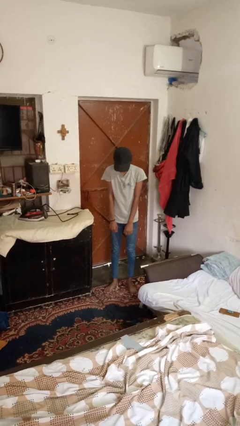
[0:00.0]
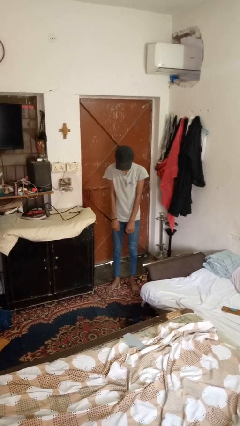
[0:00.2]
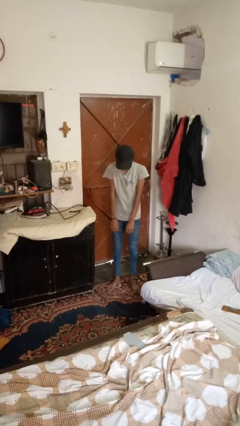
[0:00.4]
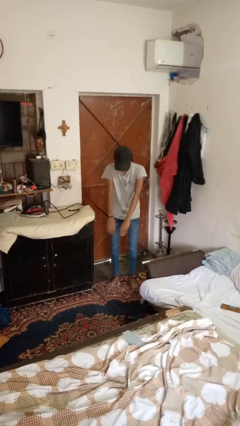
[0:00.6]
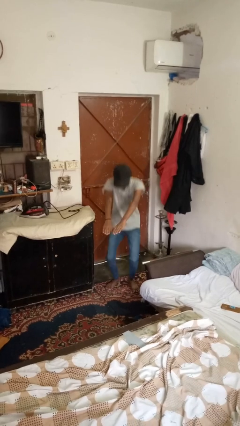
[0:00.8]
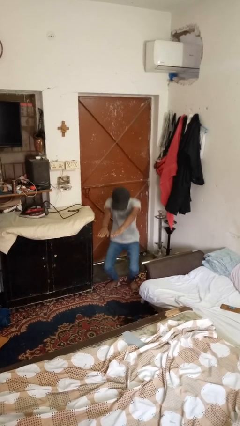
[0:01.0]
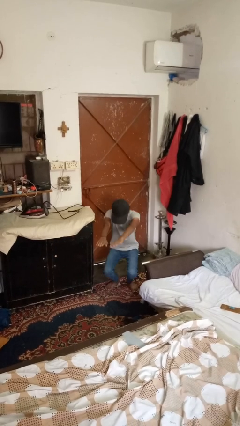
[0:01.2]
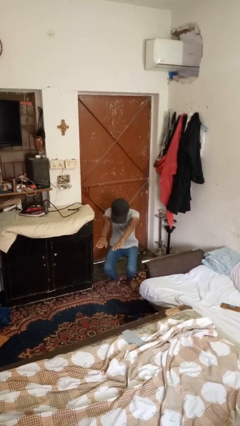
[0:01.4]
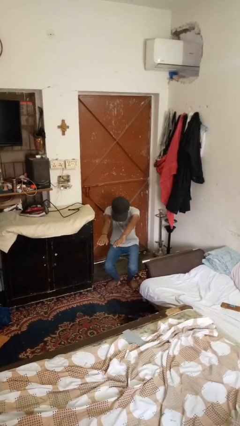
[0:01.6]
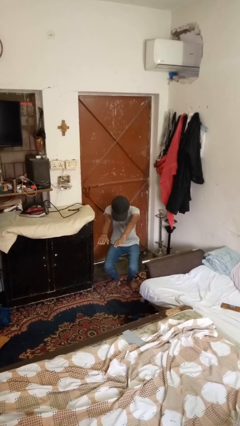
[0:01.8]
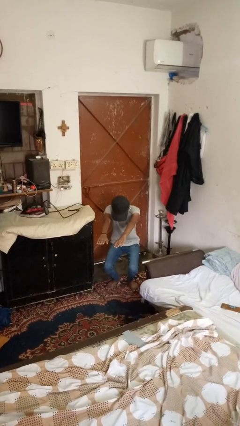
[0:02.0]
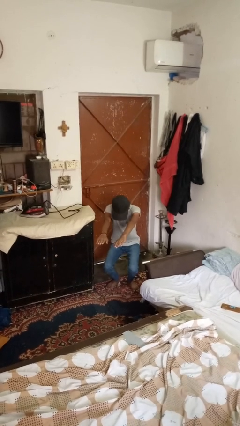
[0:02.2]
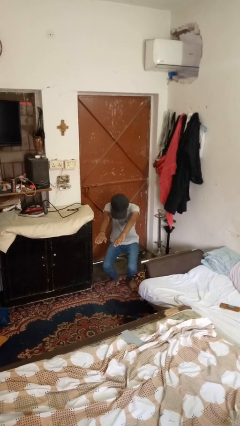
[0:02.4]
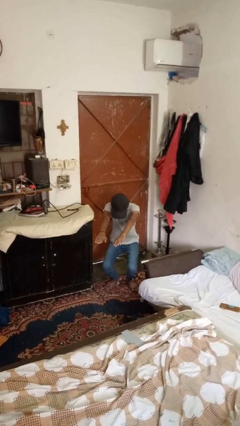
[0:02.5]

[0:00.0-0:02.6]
person squats

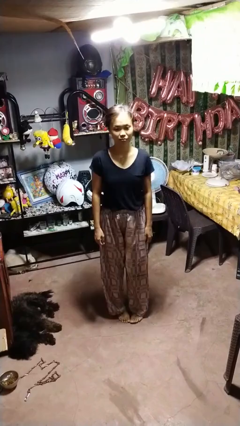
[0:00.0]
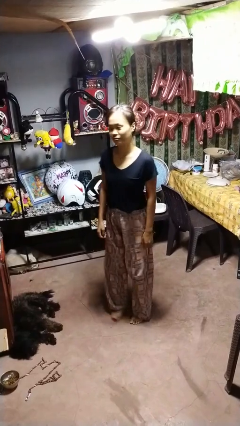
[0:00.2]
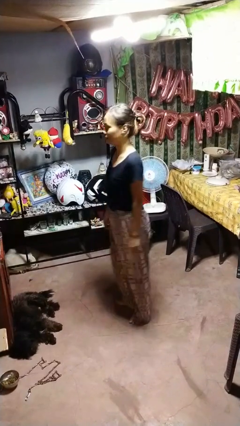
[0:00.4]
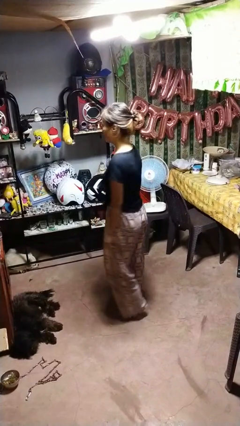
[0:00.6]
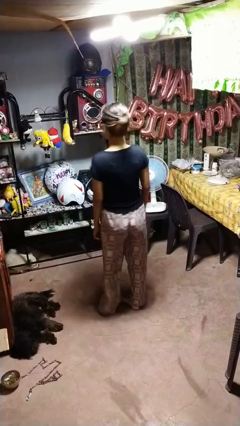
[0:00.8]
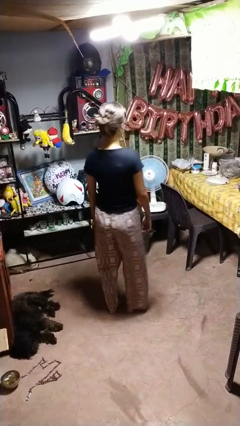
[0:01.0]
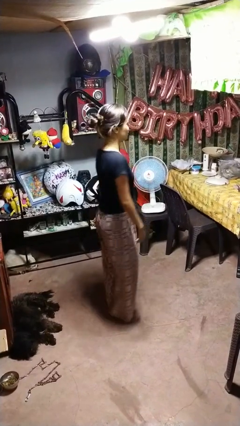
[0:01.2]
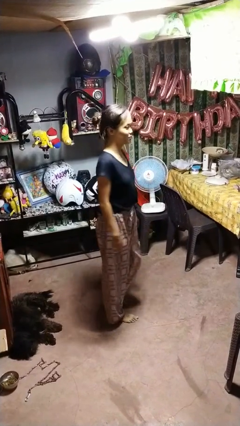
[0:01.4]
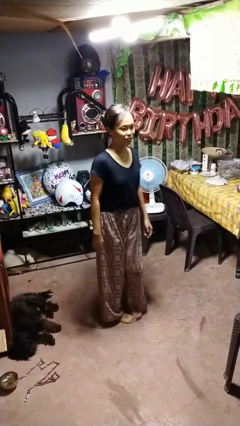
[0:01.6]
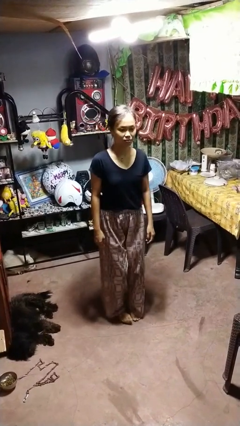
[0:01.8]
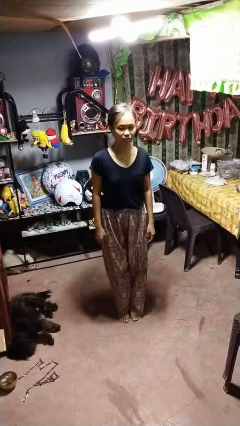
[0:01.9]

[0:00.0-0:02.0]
person twirls

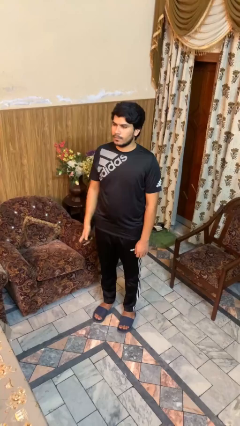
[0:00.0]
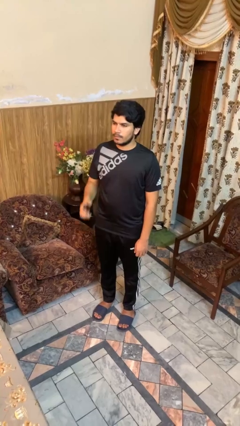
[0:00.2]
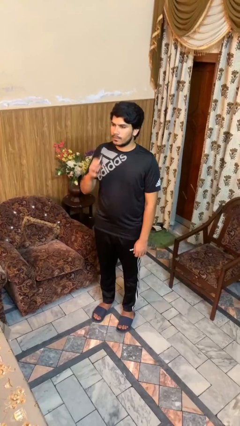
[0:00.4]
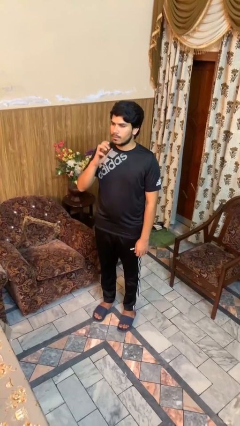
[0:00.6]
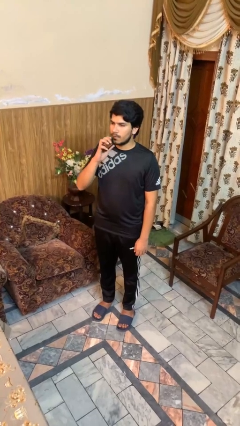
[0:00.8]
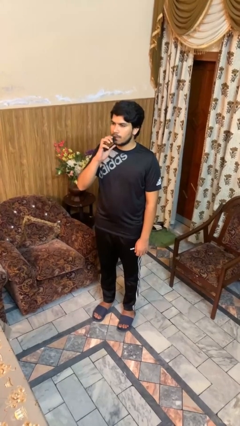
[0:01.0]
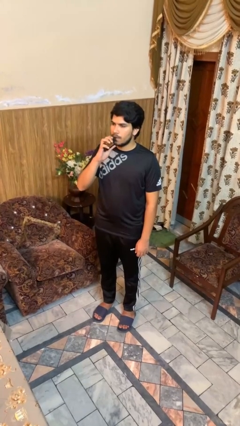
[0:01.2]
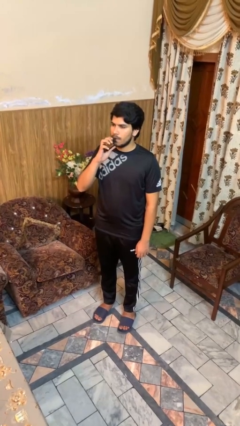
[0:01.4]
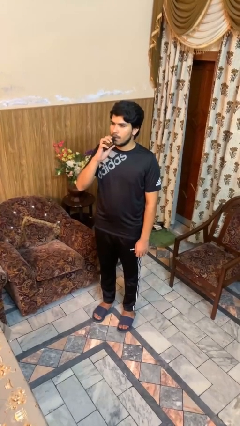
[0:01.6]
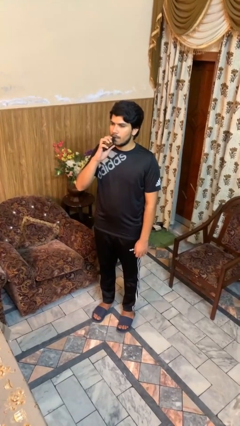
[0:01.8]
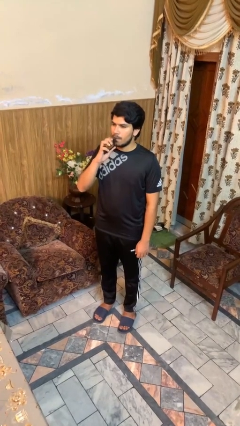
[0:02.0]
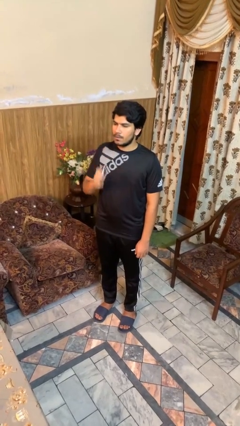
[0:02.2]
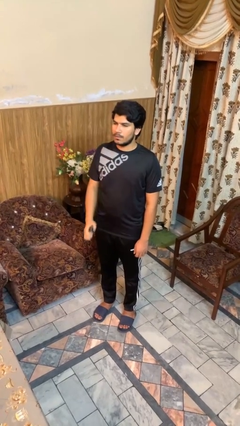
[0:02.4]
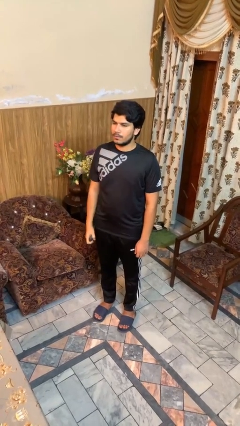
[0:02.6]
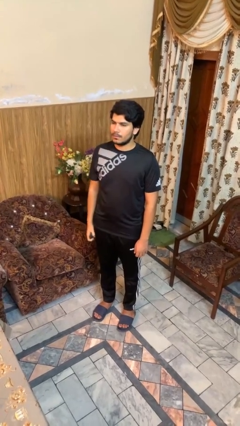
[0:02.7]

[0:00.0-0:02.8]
person vapes

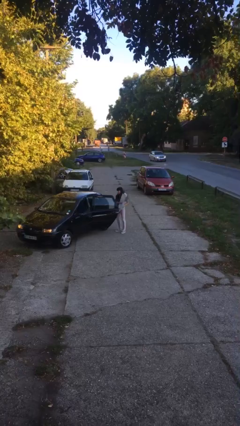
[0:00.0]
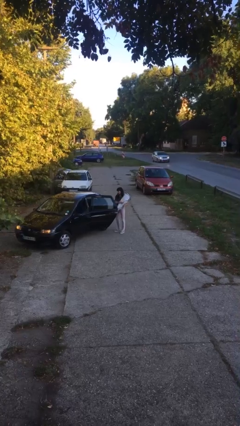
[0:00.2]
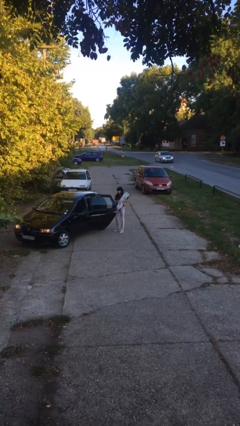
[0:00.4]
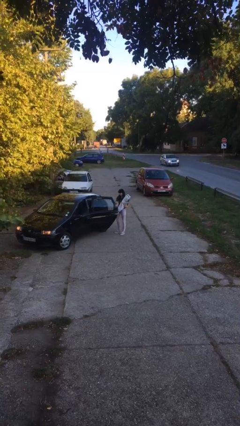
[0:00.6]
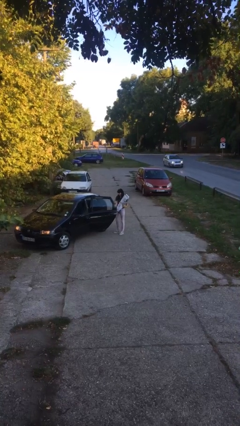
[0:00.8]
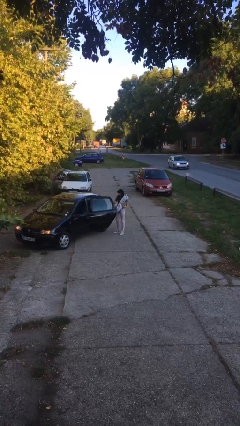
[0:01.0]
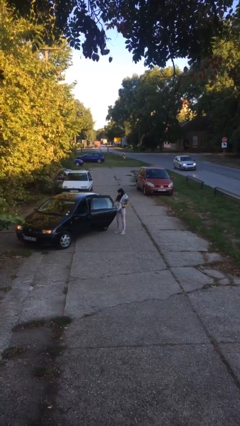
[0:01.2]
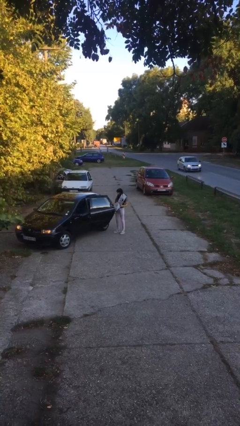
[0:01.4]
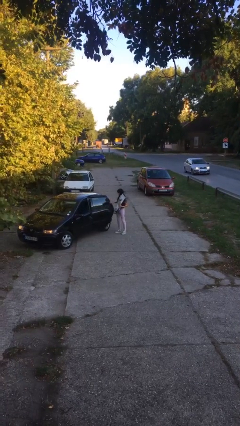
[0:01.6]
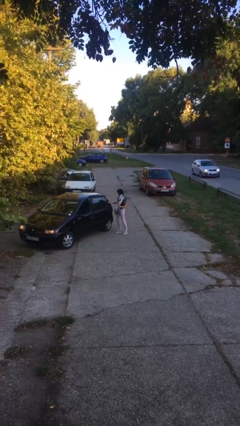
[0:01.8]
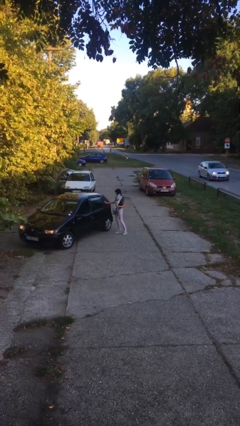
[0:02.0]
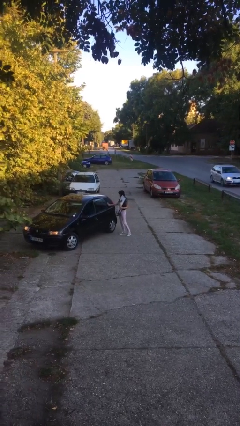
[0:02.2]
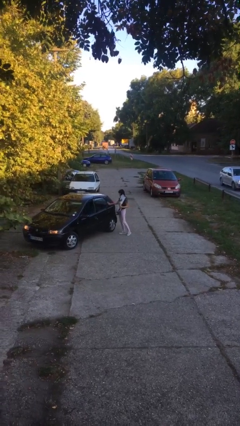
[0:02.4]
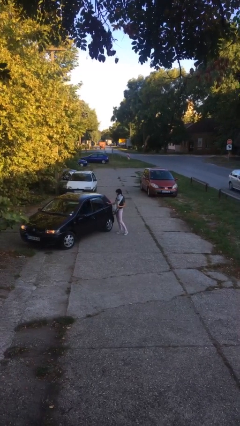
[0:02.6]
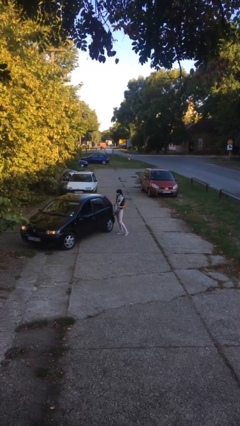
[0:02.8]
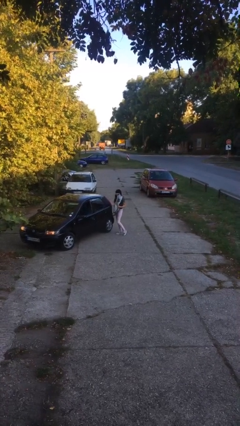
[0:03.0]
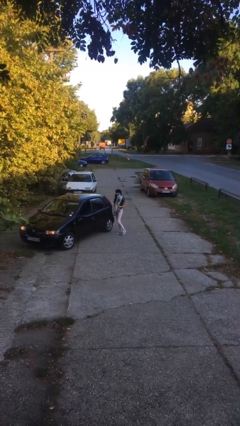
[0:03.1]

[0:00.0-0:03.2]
person closes car door

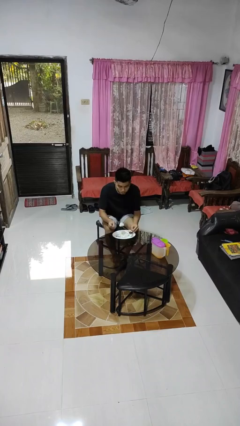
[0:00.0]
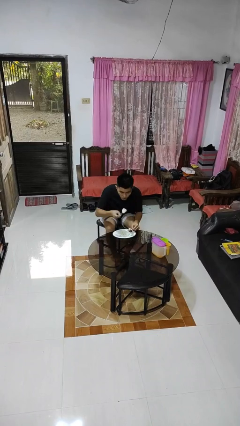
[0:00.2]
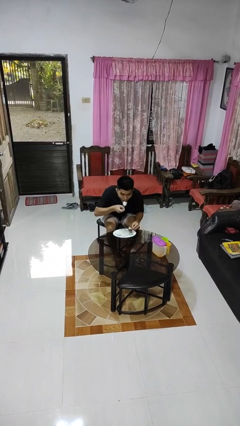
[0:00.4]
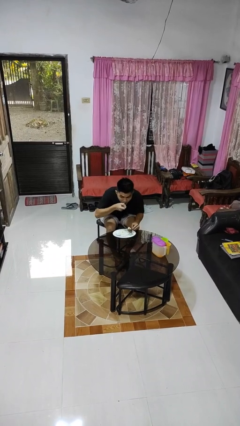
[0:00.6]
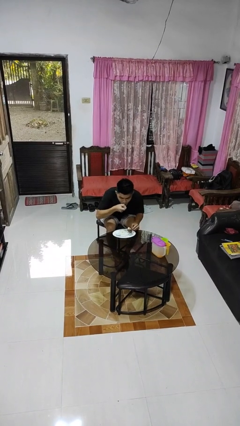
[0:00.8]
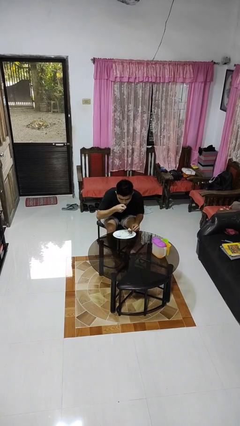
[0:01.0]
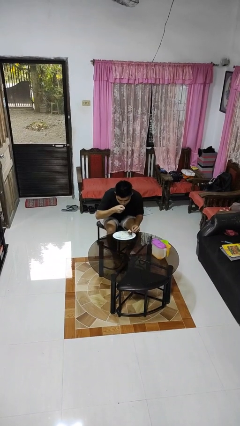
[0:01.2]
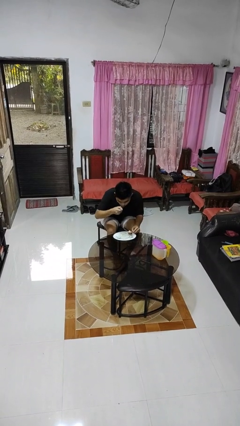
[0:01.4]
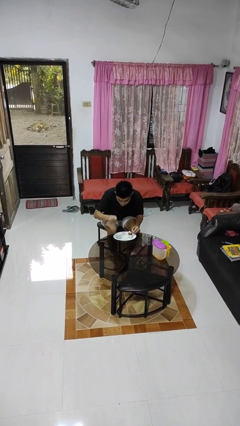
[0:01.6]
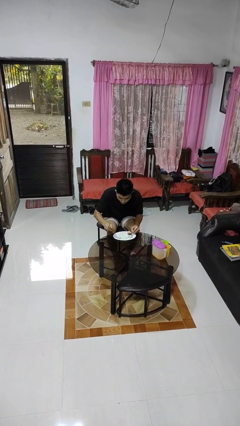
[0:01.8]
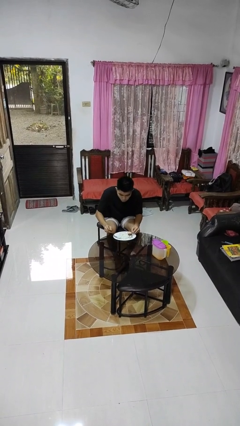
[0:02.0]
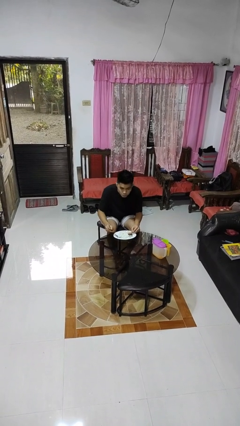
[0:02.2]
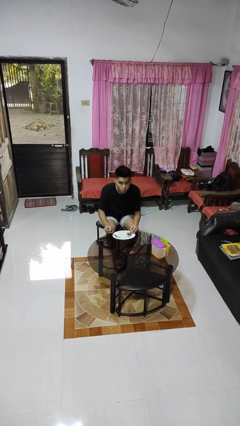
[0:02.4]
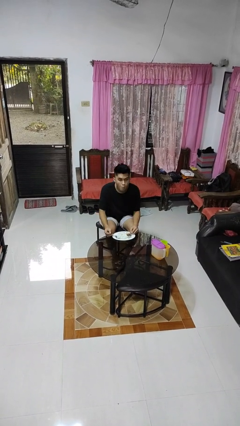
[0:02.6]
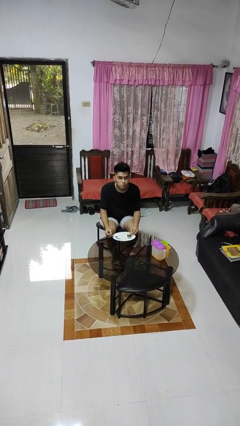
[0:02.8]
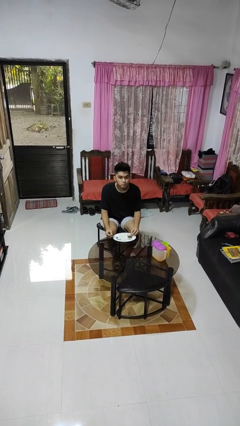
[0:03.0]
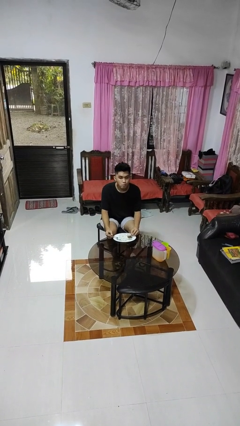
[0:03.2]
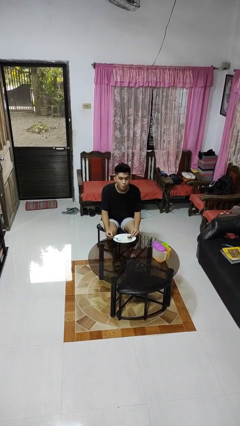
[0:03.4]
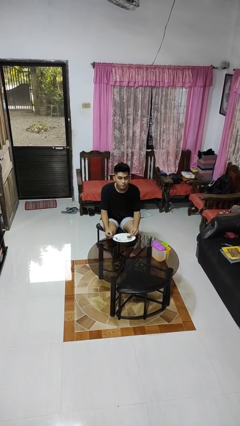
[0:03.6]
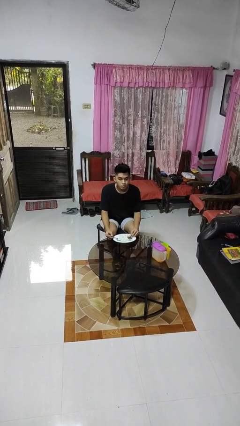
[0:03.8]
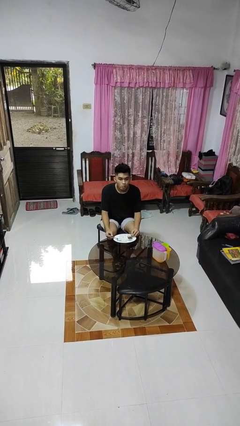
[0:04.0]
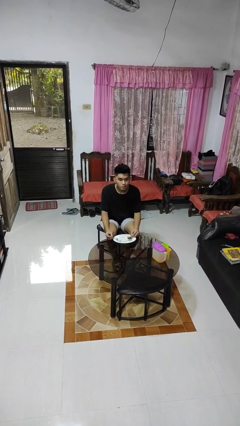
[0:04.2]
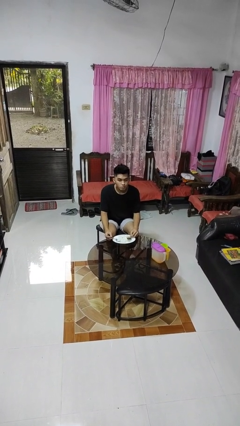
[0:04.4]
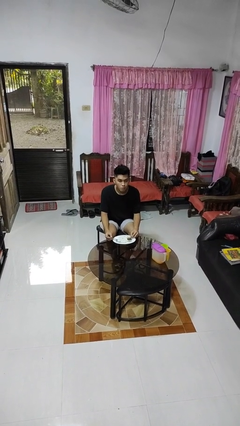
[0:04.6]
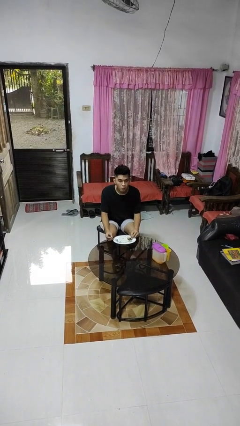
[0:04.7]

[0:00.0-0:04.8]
person eats with utensil

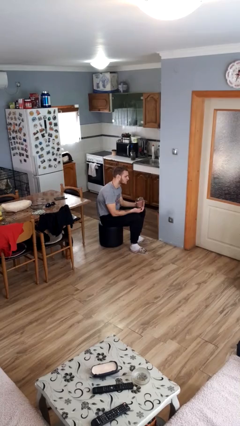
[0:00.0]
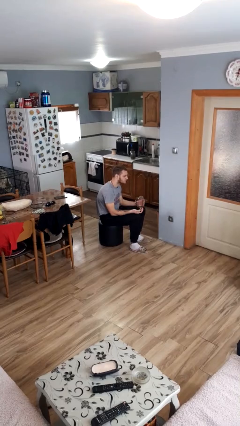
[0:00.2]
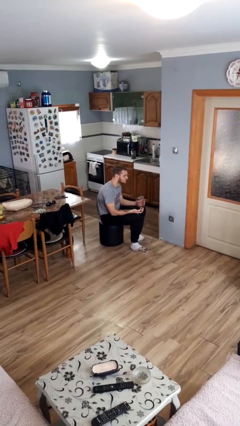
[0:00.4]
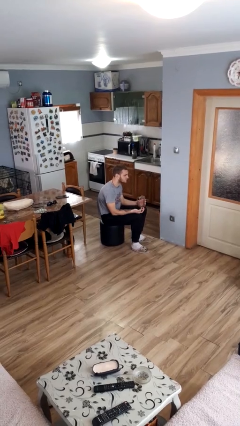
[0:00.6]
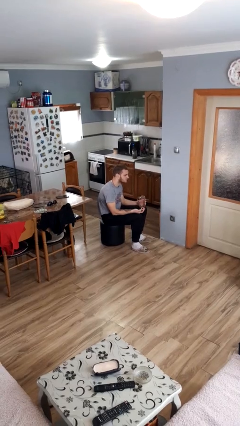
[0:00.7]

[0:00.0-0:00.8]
person opens jar

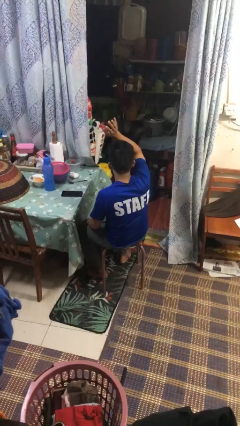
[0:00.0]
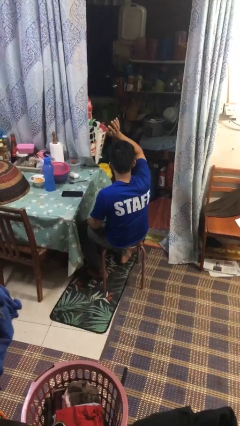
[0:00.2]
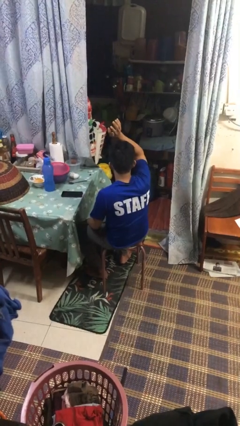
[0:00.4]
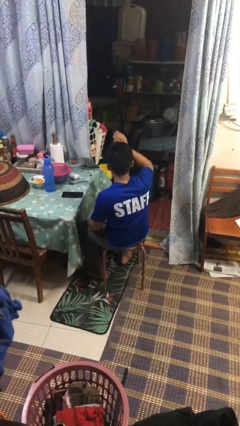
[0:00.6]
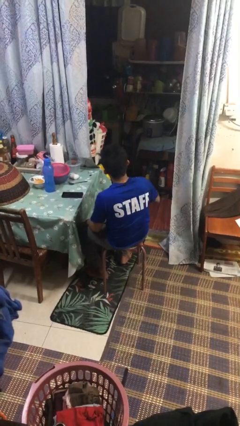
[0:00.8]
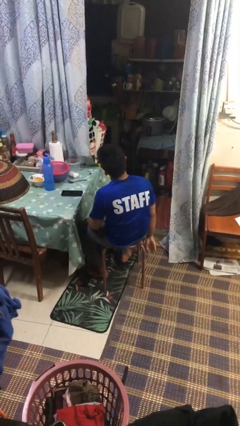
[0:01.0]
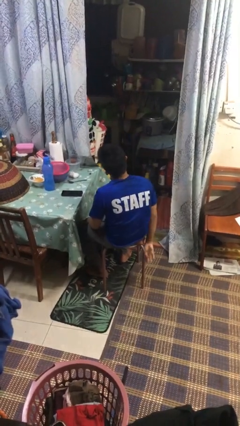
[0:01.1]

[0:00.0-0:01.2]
person gestures lower hand
